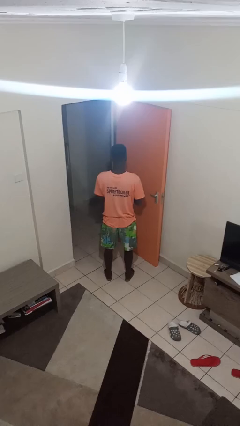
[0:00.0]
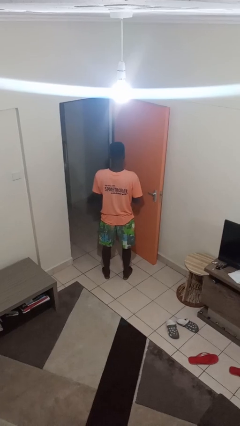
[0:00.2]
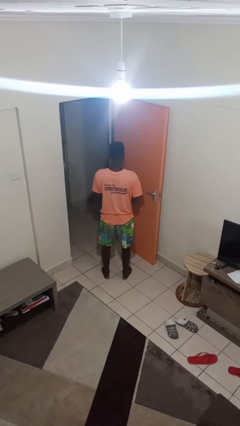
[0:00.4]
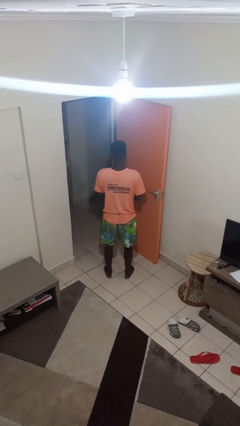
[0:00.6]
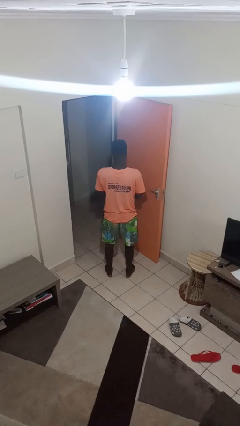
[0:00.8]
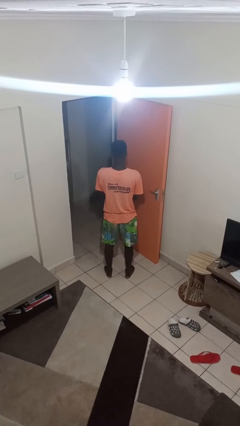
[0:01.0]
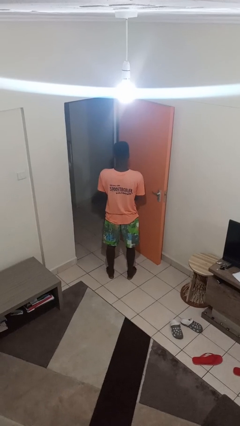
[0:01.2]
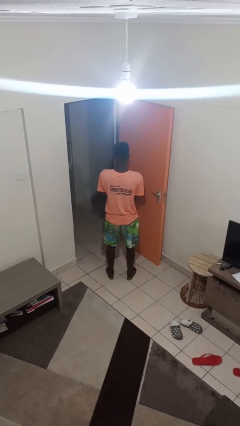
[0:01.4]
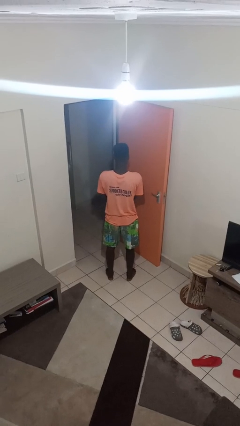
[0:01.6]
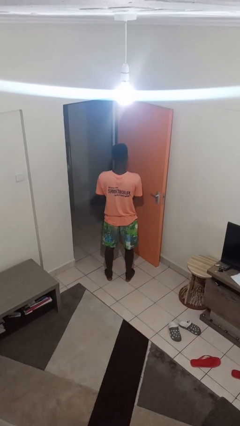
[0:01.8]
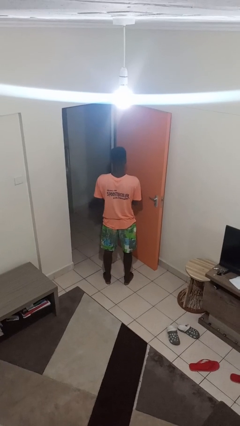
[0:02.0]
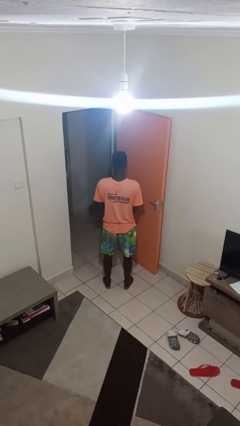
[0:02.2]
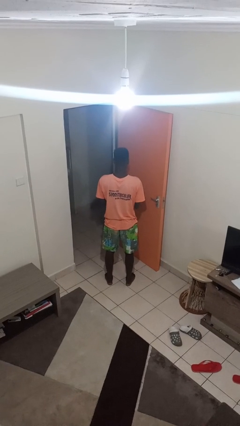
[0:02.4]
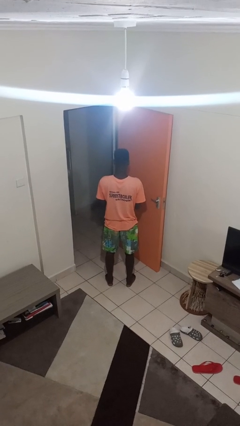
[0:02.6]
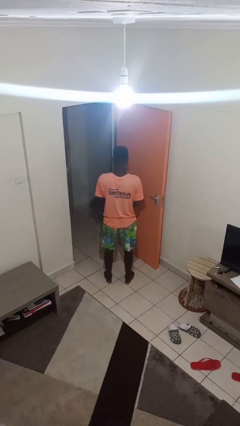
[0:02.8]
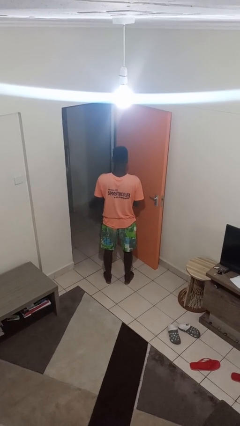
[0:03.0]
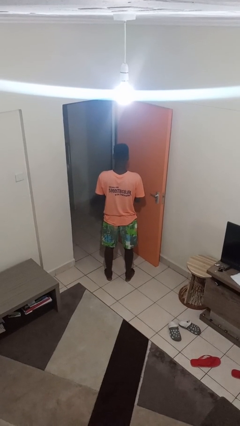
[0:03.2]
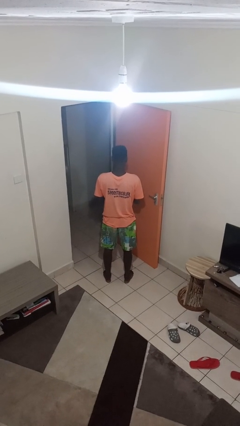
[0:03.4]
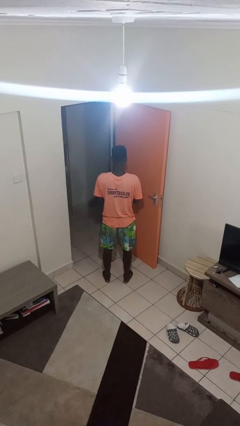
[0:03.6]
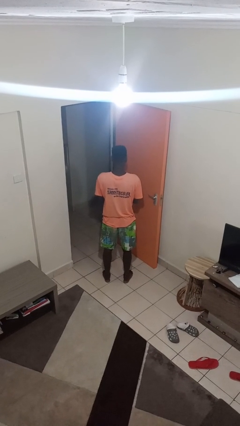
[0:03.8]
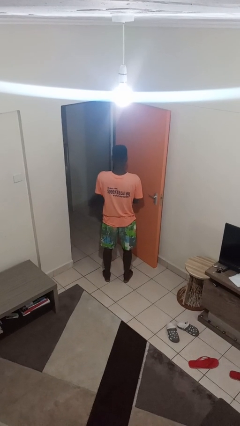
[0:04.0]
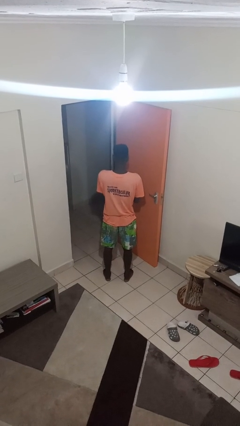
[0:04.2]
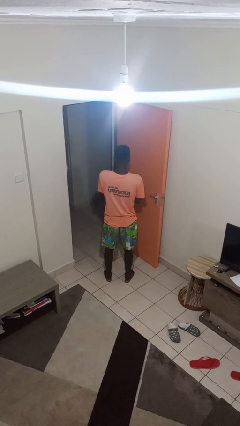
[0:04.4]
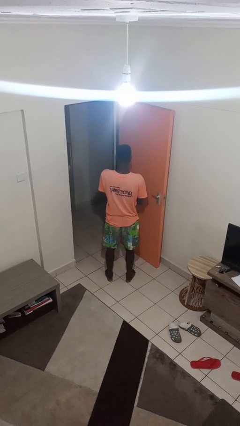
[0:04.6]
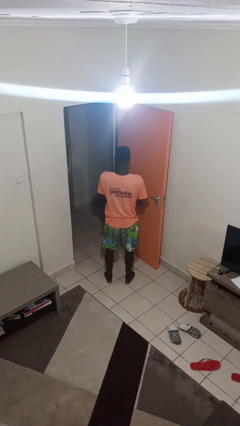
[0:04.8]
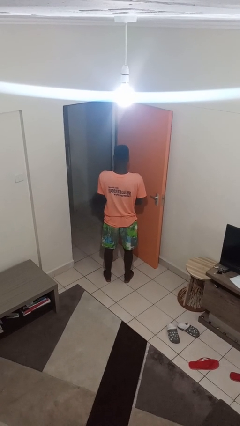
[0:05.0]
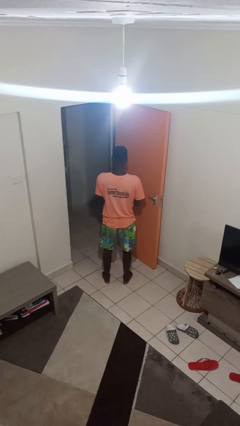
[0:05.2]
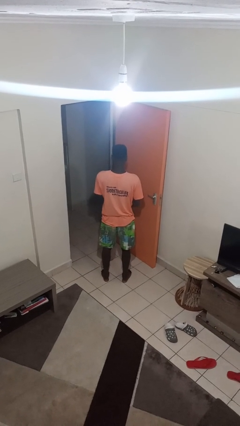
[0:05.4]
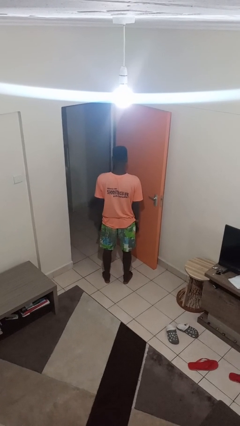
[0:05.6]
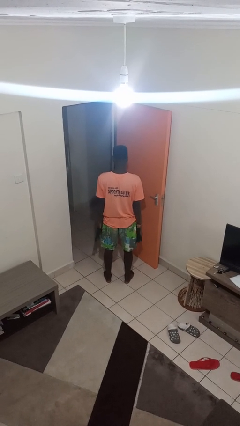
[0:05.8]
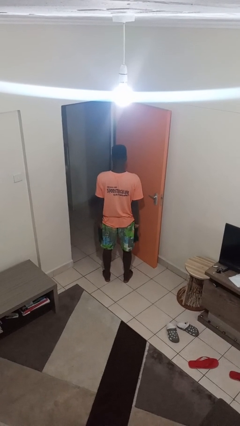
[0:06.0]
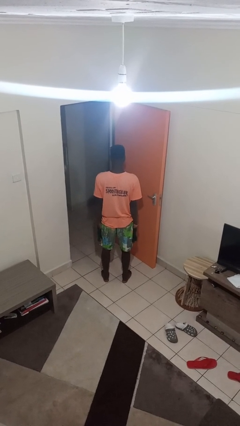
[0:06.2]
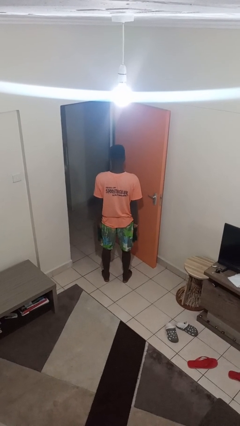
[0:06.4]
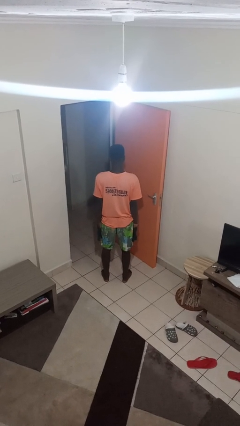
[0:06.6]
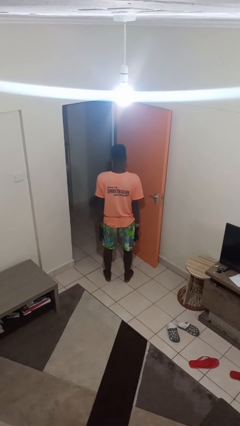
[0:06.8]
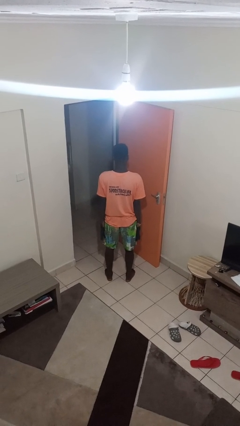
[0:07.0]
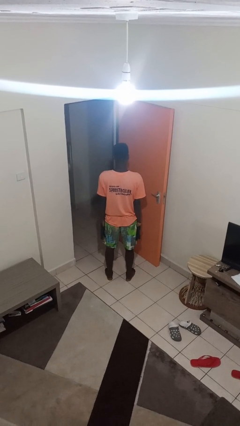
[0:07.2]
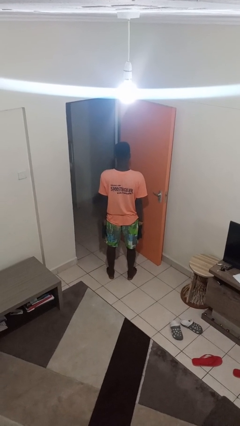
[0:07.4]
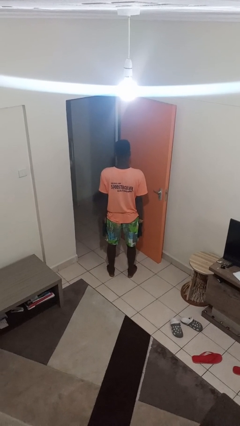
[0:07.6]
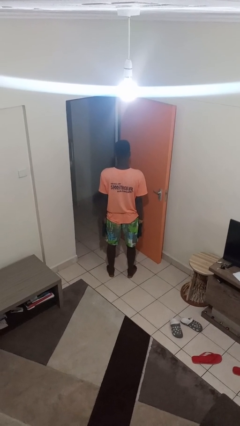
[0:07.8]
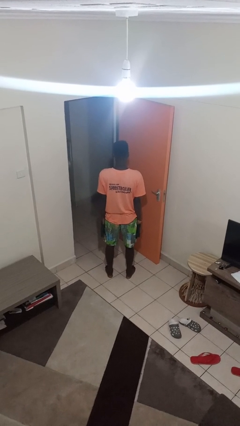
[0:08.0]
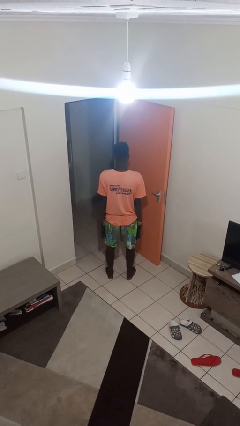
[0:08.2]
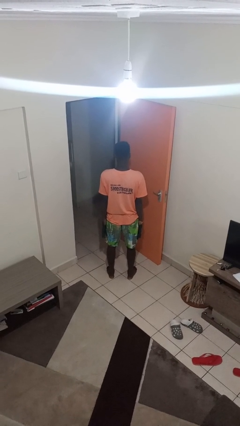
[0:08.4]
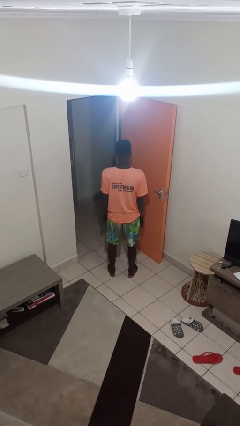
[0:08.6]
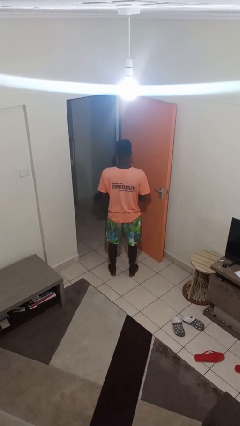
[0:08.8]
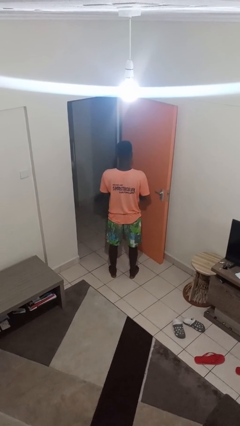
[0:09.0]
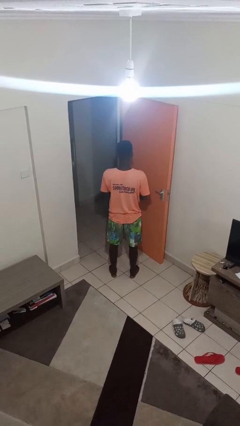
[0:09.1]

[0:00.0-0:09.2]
person puts on gloves

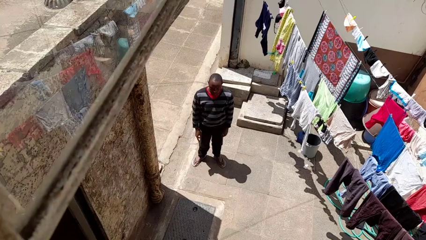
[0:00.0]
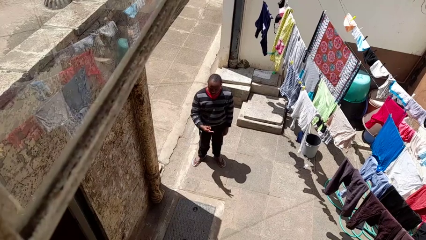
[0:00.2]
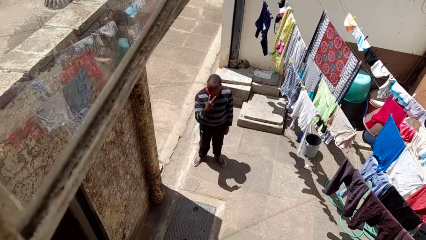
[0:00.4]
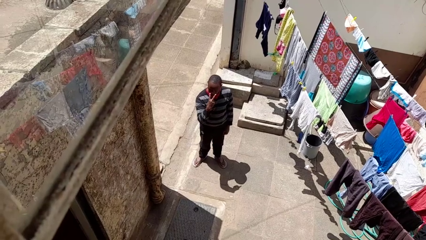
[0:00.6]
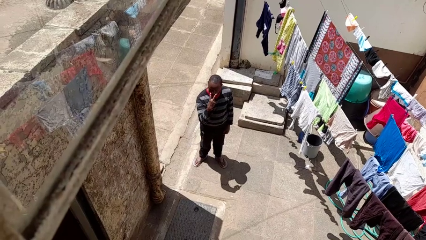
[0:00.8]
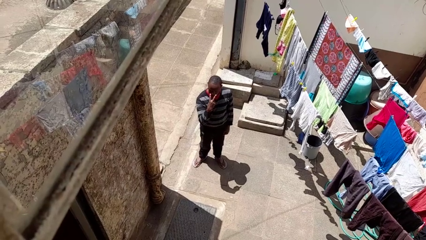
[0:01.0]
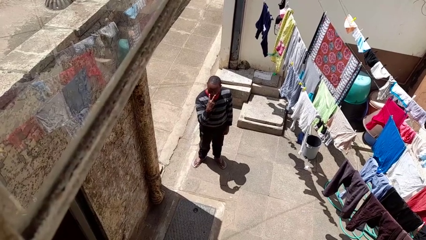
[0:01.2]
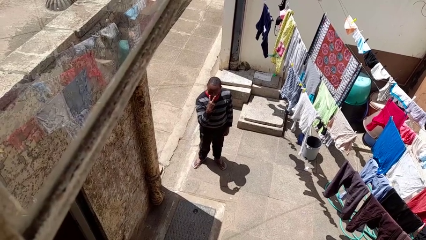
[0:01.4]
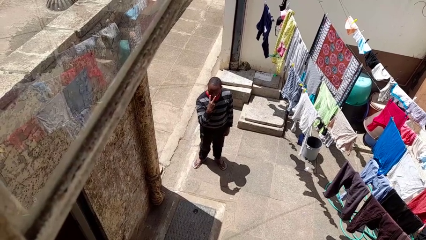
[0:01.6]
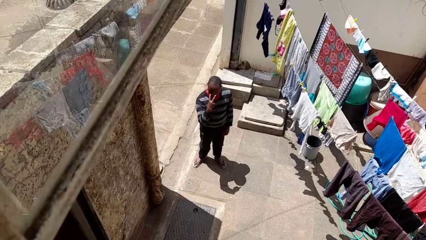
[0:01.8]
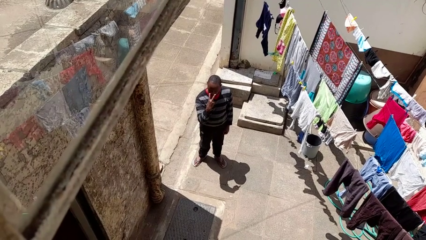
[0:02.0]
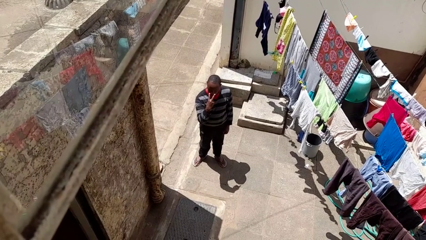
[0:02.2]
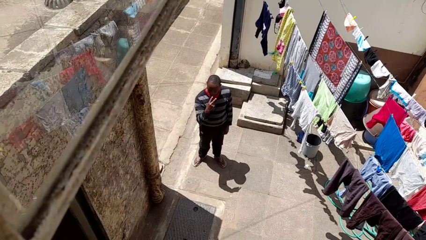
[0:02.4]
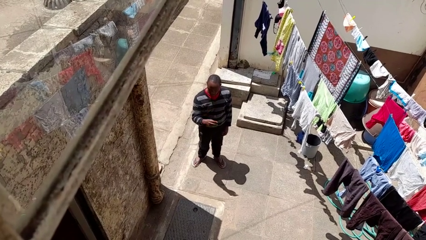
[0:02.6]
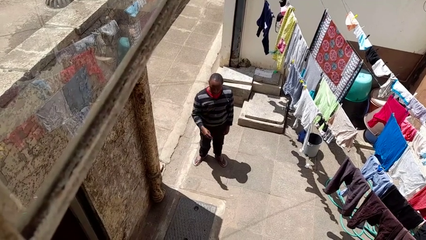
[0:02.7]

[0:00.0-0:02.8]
person gestures watch closely

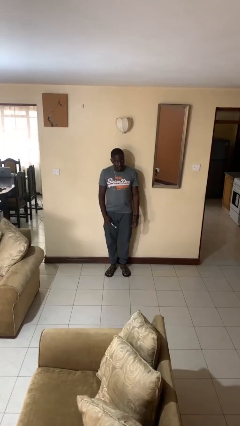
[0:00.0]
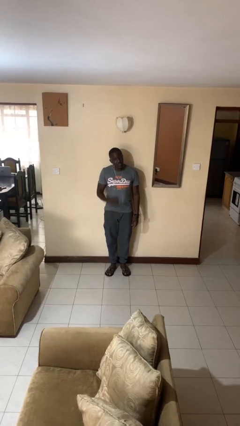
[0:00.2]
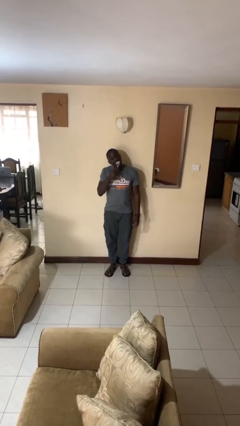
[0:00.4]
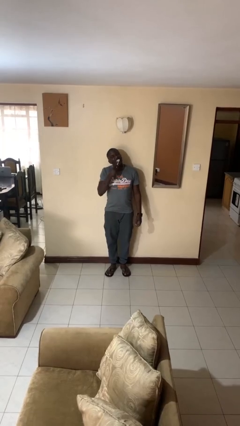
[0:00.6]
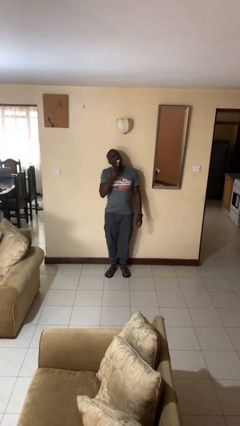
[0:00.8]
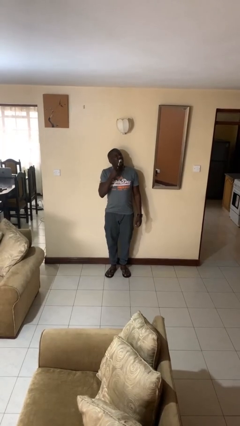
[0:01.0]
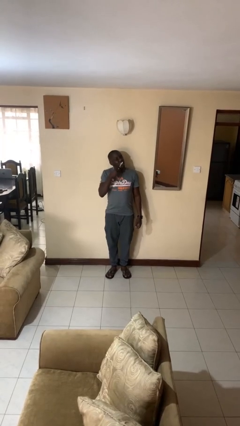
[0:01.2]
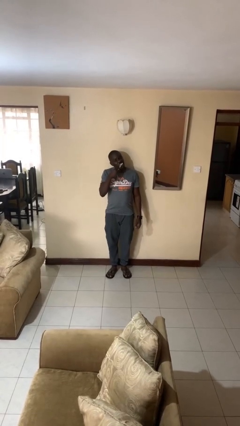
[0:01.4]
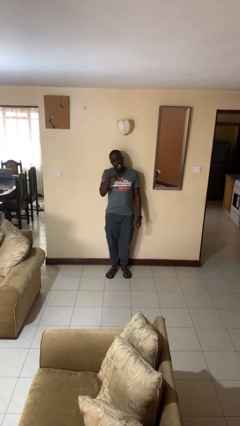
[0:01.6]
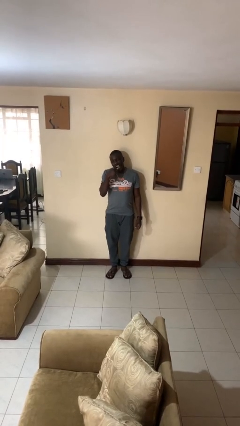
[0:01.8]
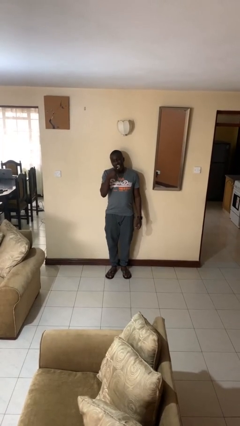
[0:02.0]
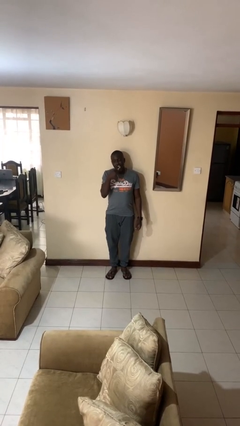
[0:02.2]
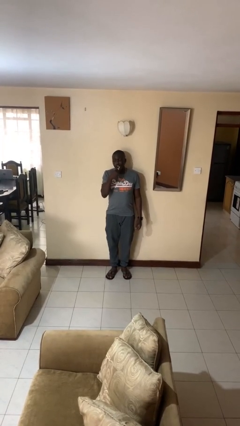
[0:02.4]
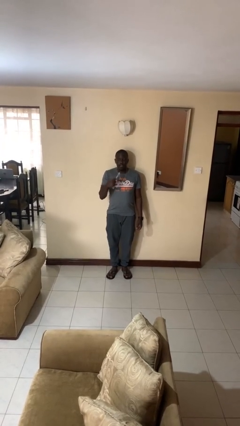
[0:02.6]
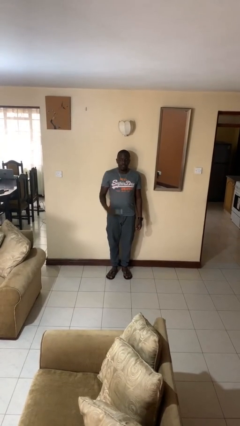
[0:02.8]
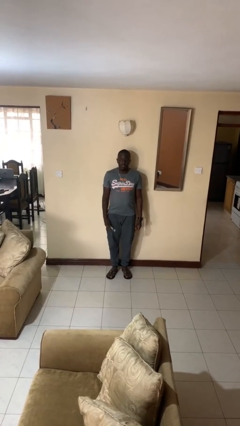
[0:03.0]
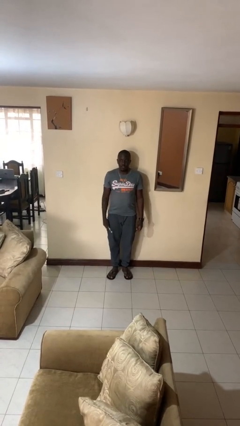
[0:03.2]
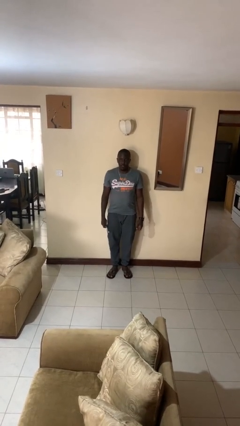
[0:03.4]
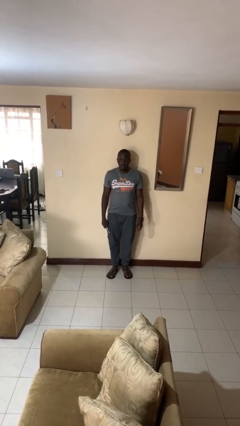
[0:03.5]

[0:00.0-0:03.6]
person brushes teeth

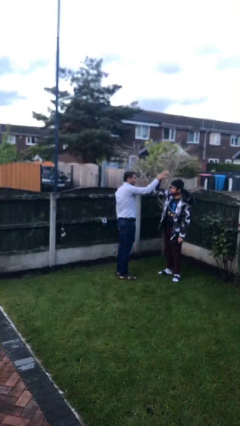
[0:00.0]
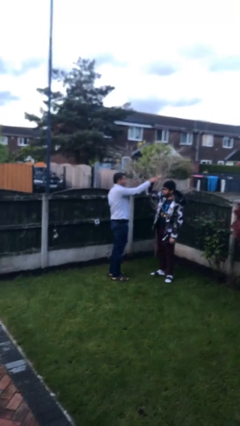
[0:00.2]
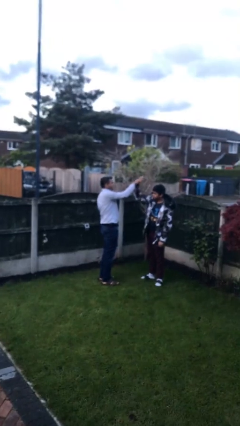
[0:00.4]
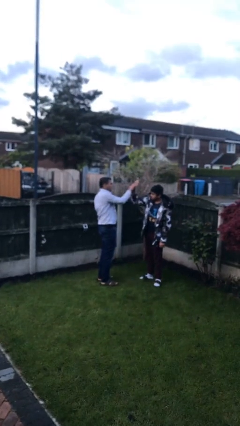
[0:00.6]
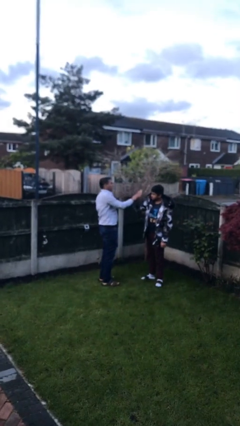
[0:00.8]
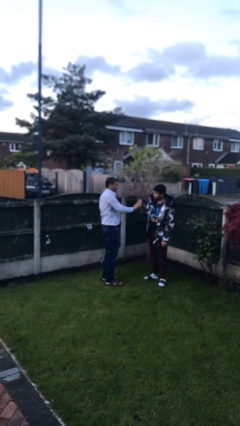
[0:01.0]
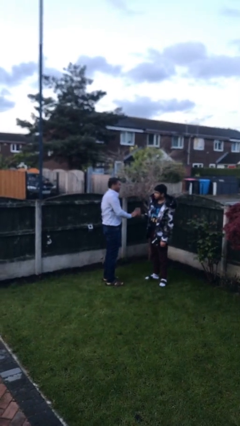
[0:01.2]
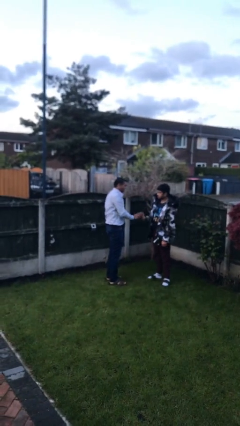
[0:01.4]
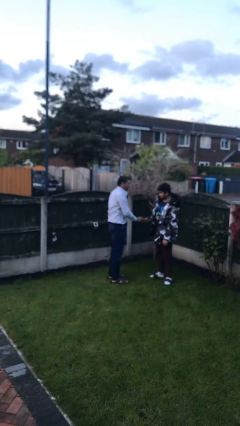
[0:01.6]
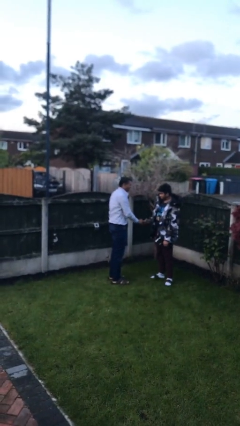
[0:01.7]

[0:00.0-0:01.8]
person highfives hand

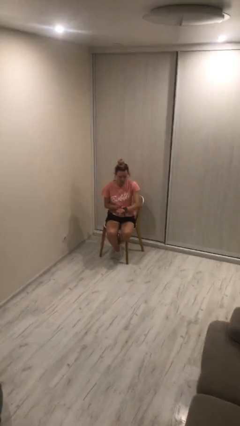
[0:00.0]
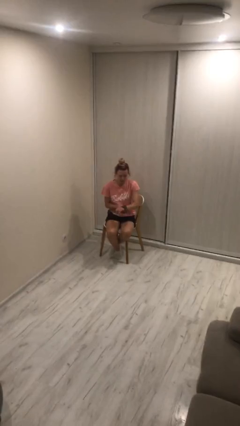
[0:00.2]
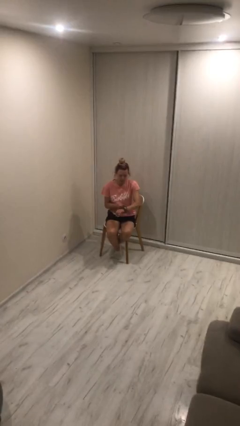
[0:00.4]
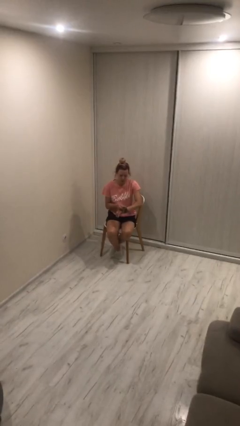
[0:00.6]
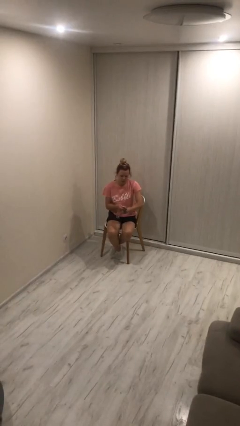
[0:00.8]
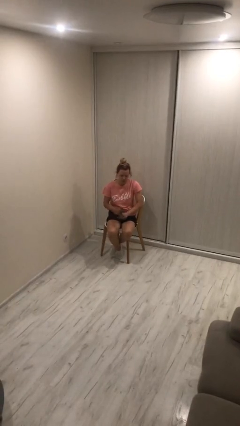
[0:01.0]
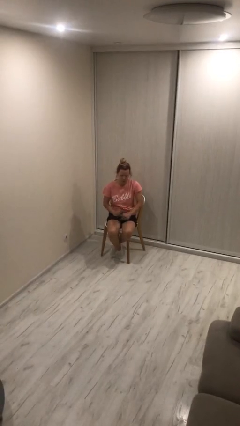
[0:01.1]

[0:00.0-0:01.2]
person takes off wristwatch
